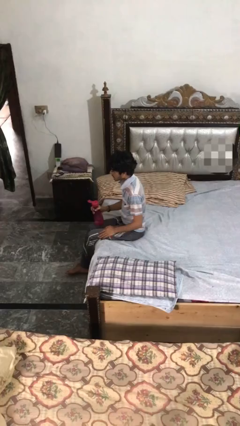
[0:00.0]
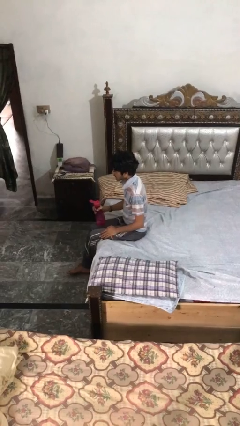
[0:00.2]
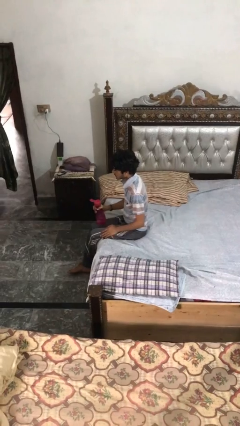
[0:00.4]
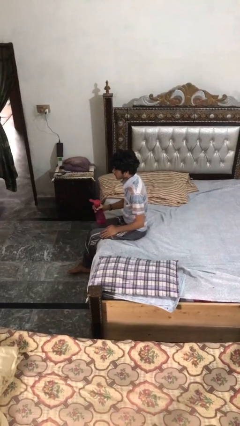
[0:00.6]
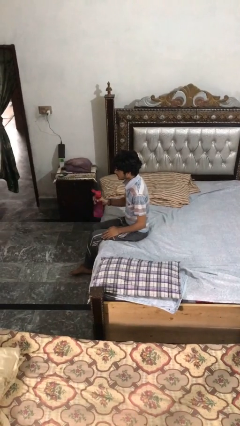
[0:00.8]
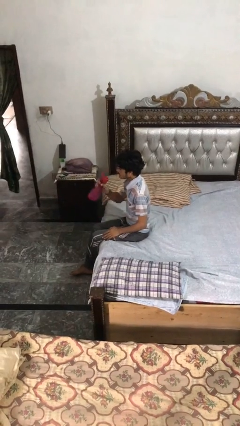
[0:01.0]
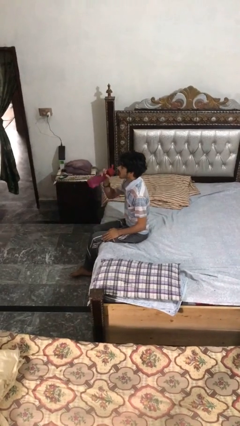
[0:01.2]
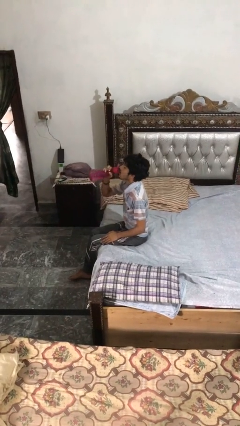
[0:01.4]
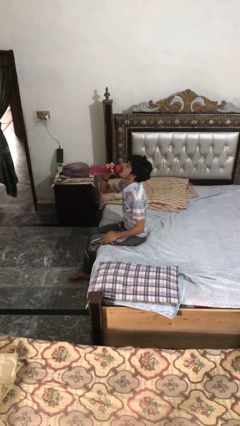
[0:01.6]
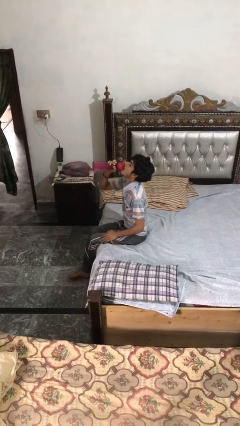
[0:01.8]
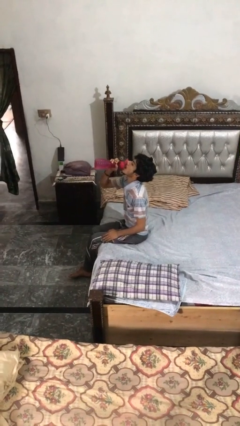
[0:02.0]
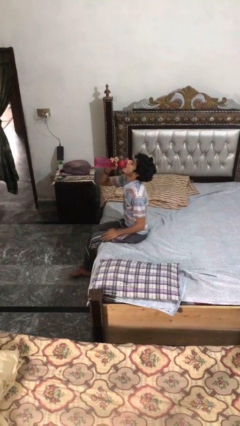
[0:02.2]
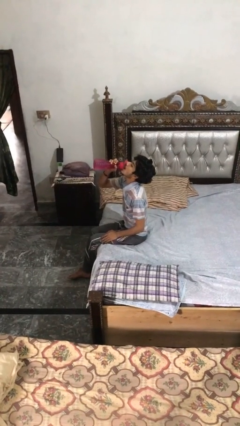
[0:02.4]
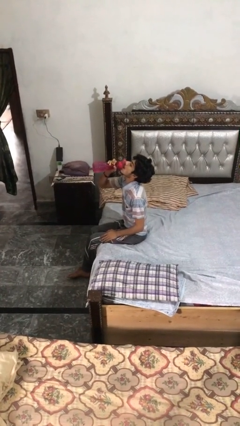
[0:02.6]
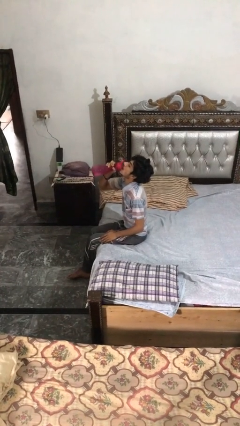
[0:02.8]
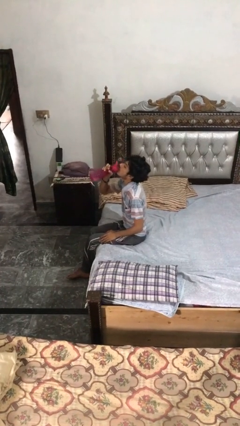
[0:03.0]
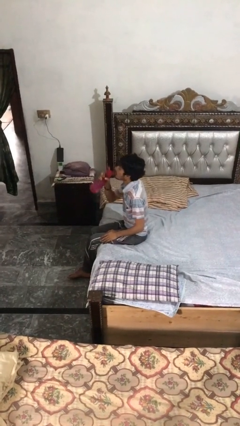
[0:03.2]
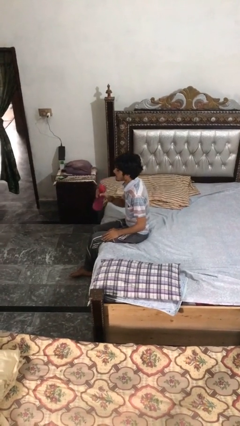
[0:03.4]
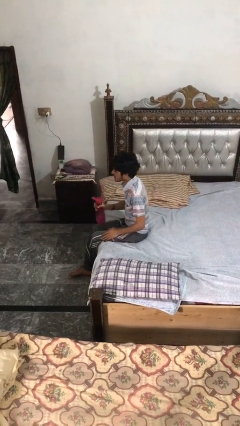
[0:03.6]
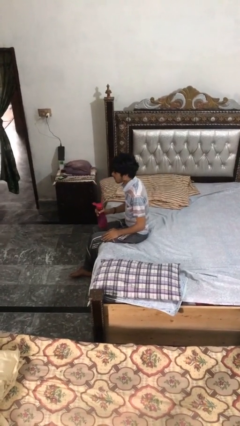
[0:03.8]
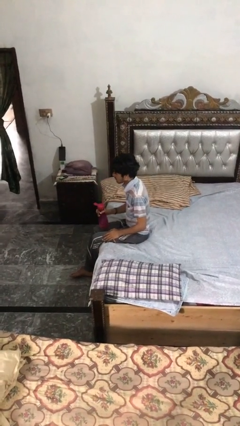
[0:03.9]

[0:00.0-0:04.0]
person drinks from bottle

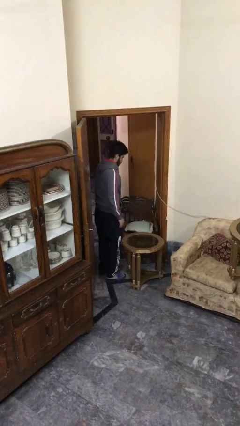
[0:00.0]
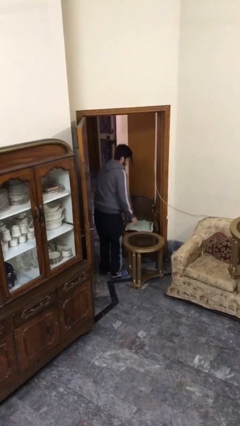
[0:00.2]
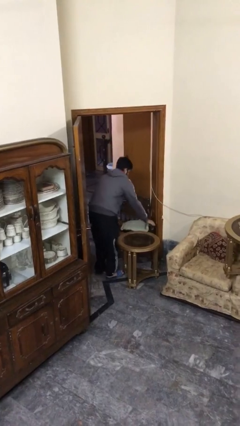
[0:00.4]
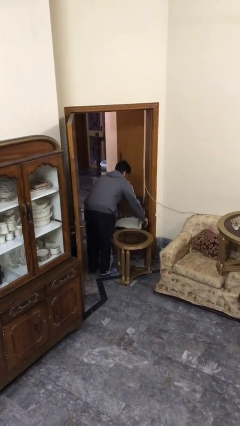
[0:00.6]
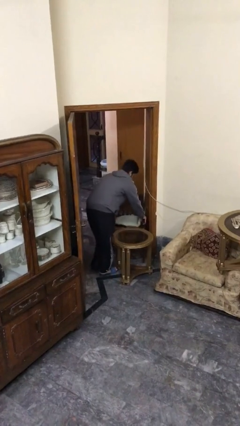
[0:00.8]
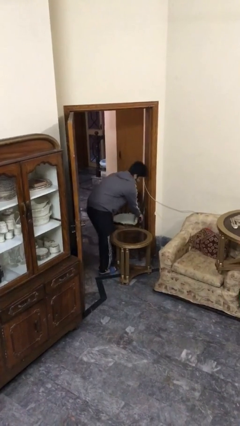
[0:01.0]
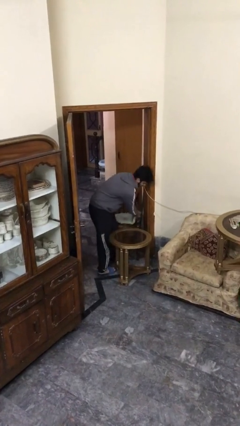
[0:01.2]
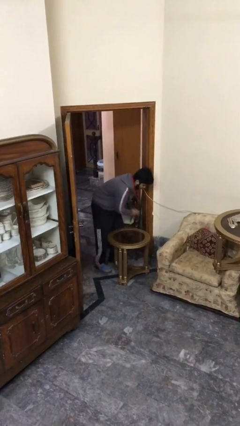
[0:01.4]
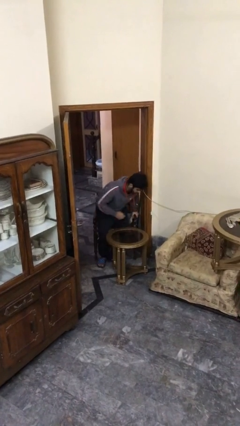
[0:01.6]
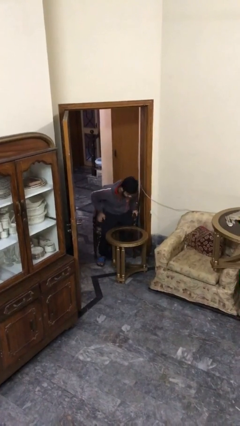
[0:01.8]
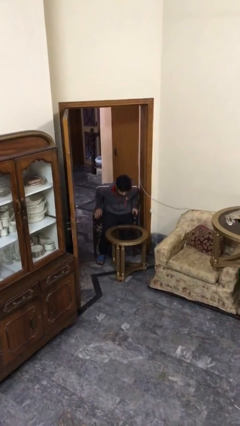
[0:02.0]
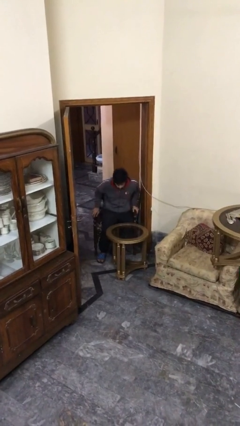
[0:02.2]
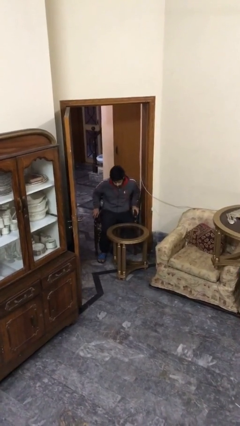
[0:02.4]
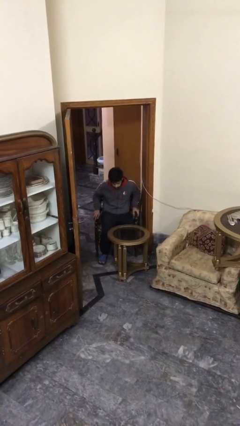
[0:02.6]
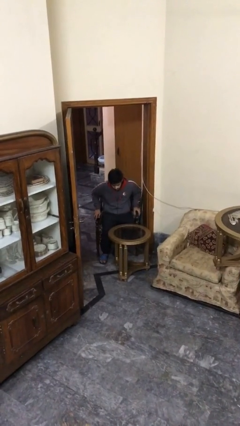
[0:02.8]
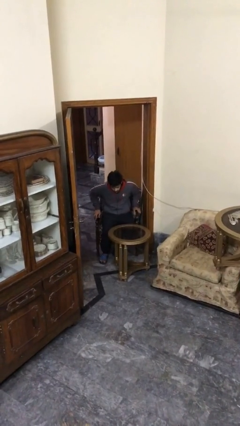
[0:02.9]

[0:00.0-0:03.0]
person sits down

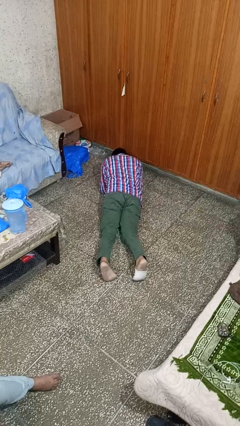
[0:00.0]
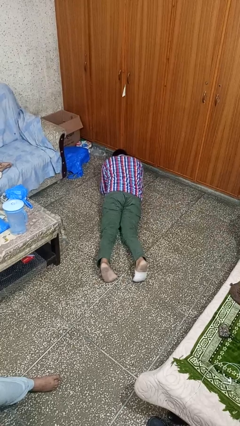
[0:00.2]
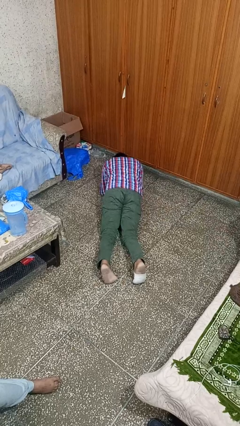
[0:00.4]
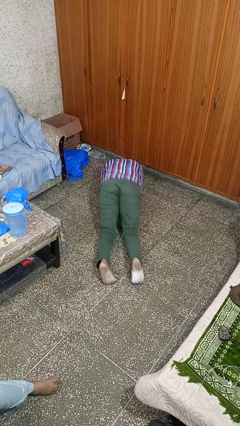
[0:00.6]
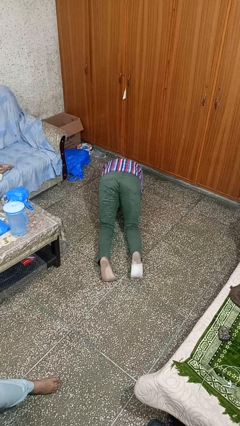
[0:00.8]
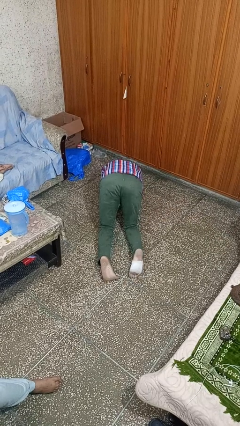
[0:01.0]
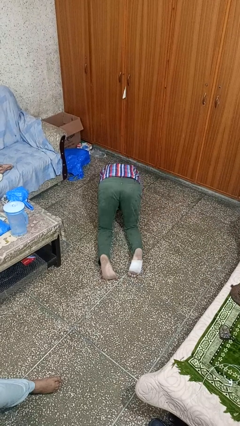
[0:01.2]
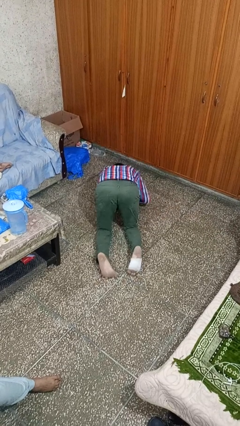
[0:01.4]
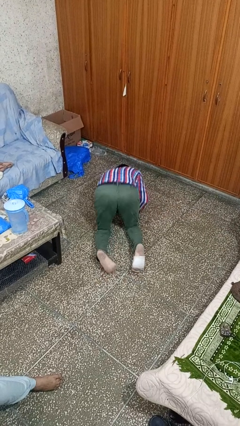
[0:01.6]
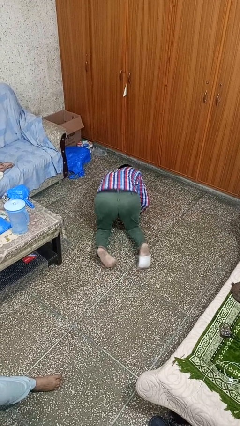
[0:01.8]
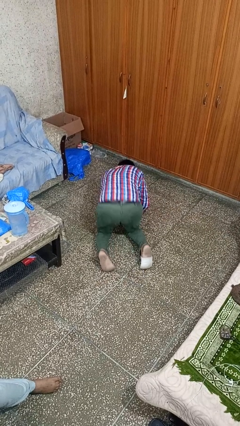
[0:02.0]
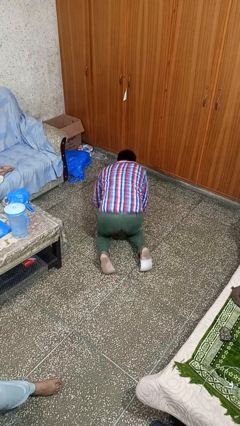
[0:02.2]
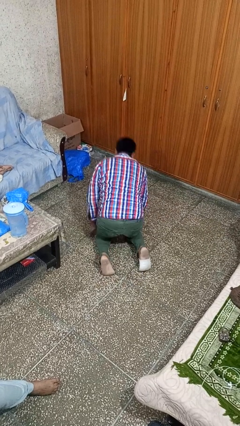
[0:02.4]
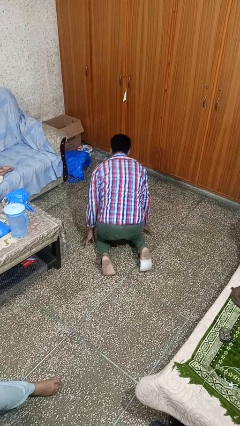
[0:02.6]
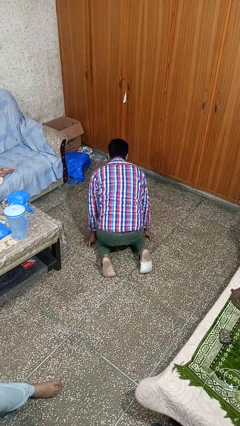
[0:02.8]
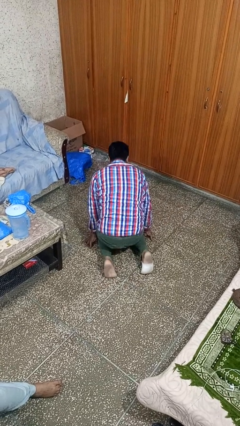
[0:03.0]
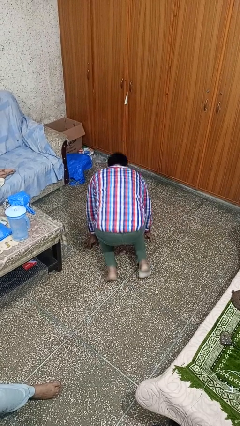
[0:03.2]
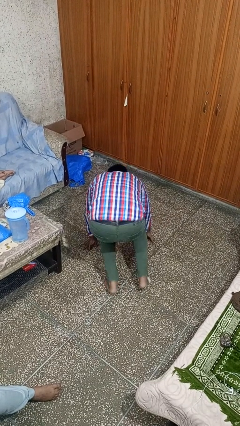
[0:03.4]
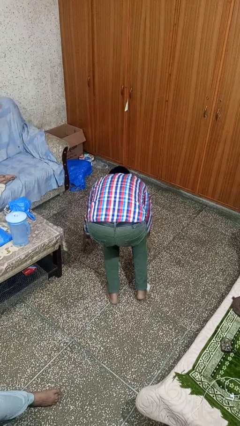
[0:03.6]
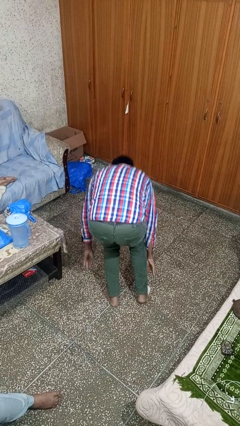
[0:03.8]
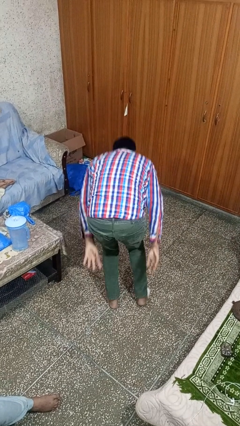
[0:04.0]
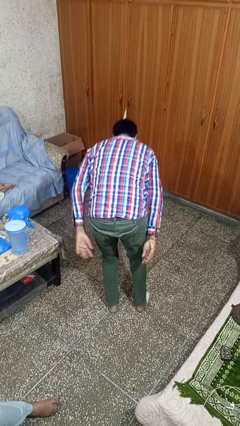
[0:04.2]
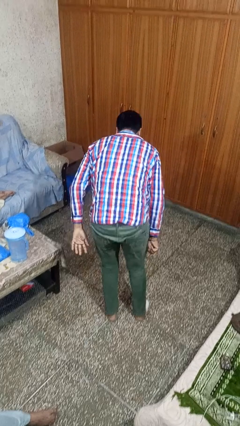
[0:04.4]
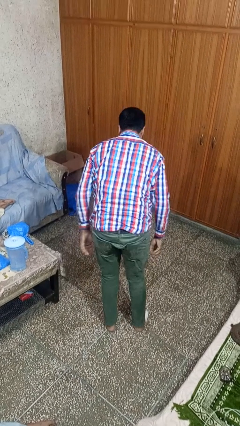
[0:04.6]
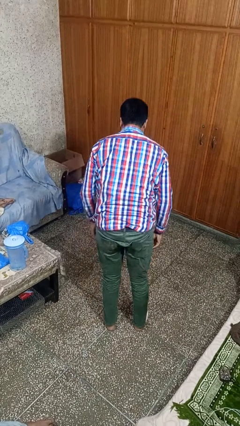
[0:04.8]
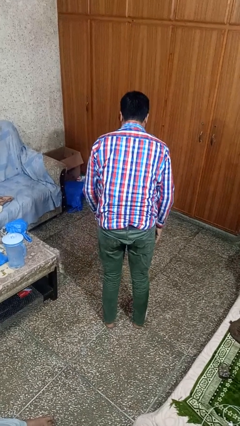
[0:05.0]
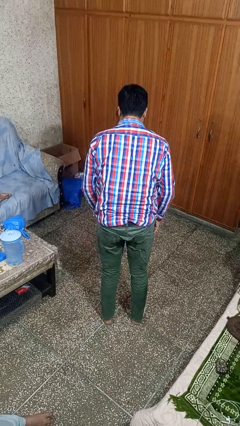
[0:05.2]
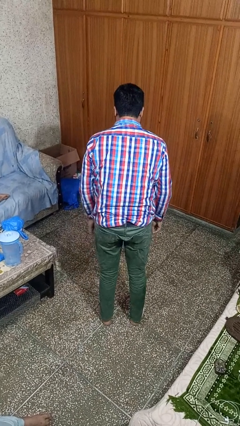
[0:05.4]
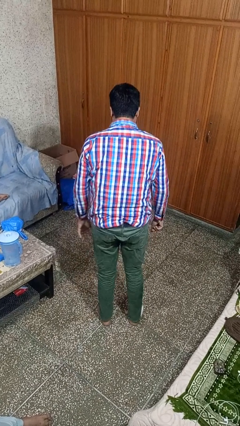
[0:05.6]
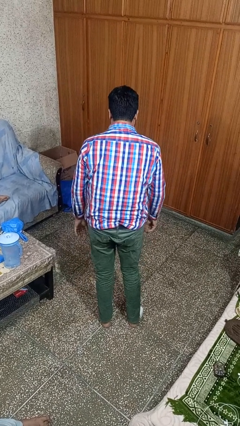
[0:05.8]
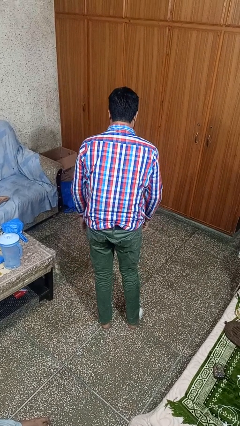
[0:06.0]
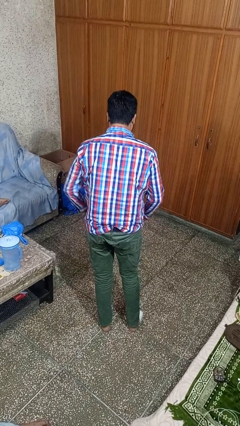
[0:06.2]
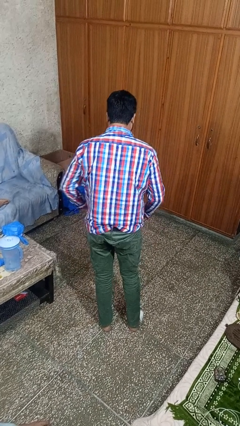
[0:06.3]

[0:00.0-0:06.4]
person stands up from floor

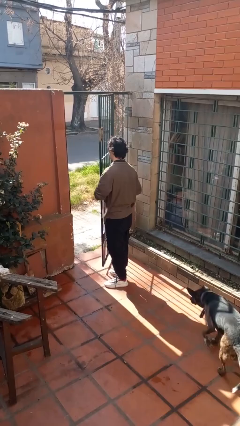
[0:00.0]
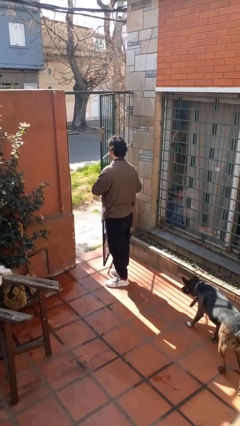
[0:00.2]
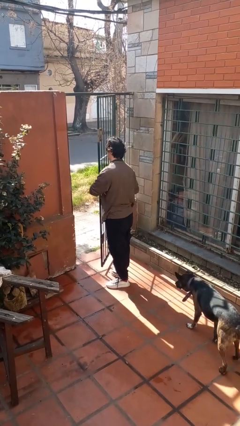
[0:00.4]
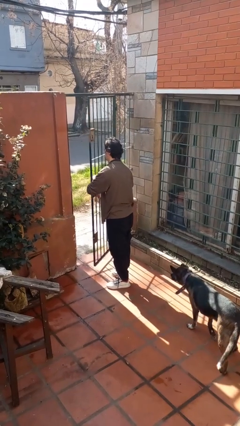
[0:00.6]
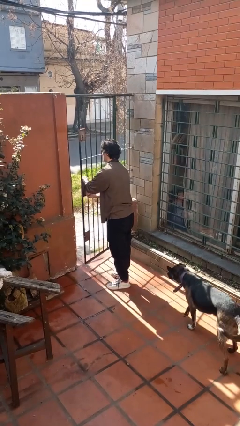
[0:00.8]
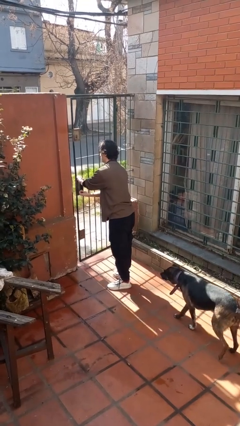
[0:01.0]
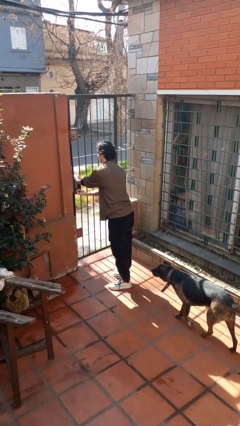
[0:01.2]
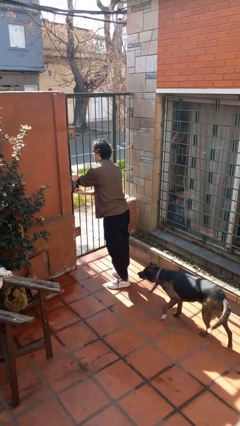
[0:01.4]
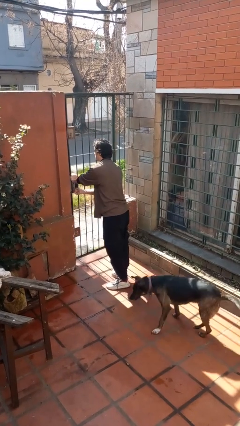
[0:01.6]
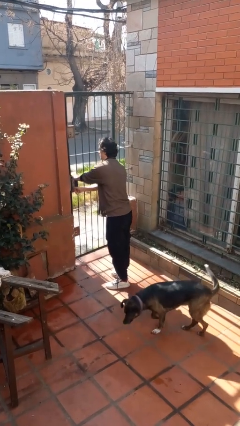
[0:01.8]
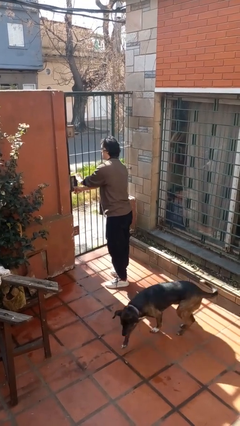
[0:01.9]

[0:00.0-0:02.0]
person closes gate

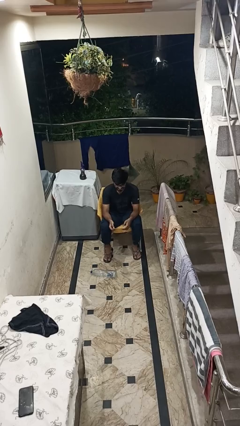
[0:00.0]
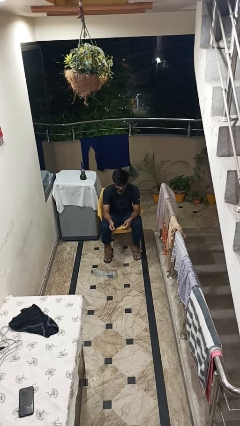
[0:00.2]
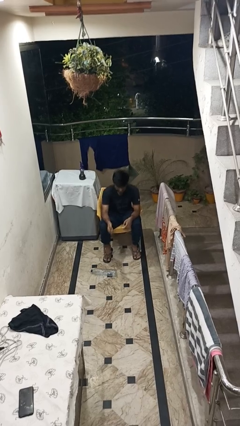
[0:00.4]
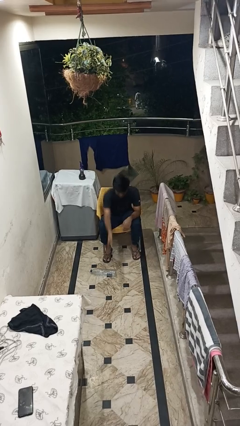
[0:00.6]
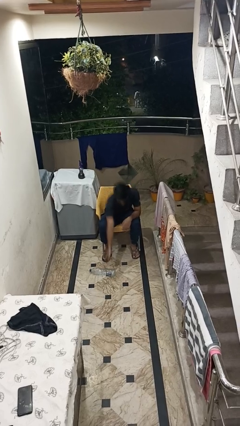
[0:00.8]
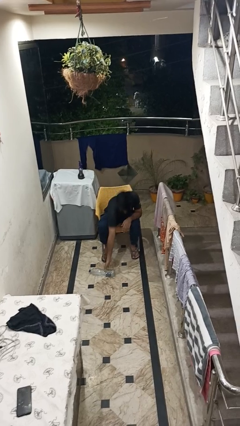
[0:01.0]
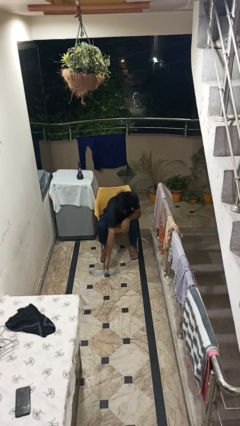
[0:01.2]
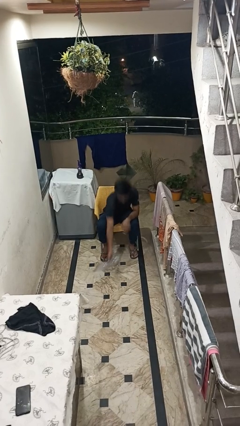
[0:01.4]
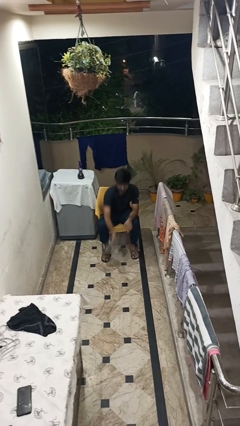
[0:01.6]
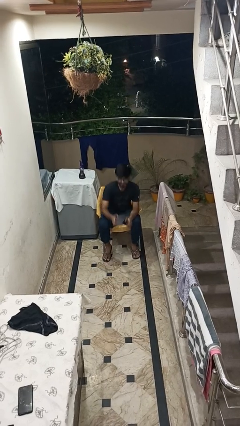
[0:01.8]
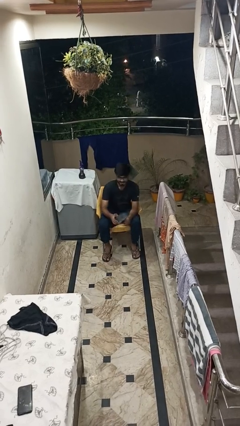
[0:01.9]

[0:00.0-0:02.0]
person picks up object from floor

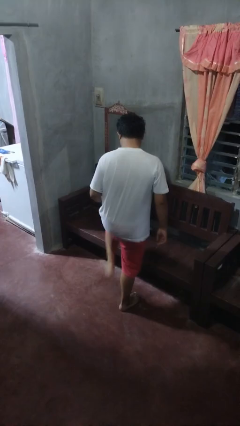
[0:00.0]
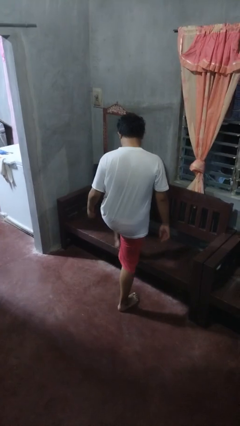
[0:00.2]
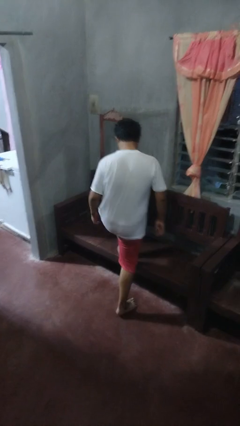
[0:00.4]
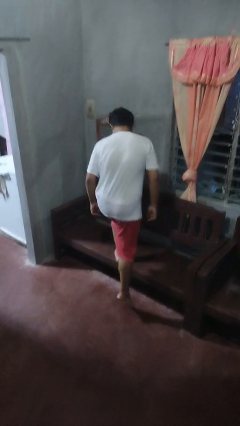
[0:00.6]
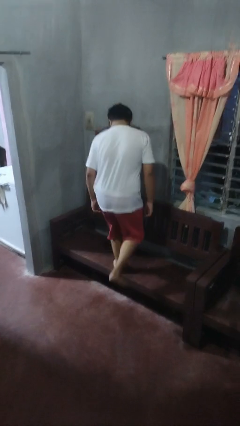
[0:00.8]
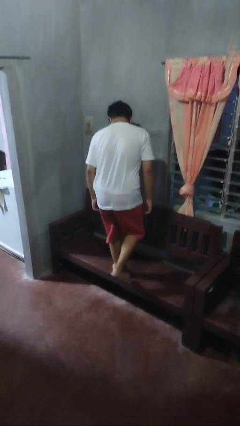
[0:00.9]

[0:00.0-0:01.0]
person climbs on couch
